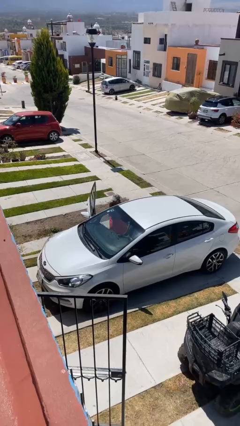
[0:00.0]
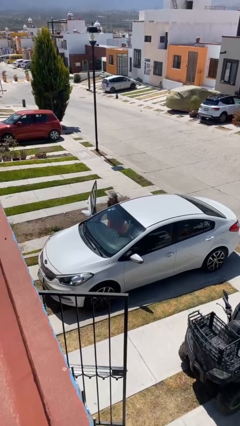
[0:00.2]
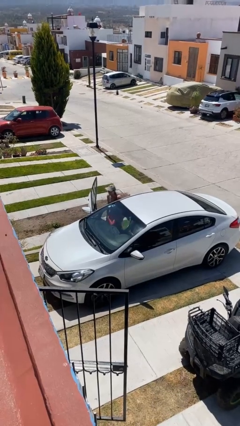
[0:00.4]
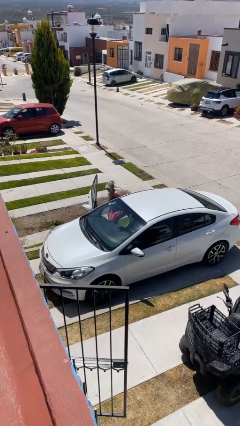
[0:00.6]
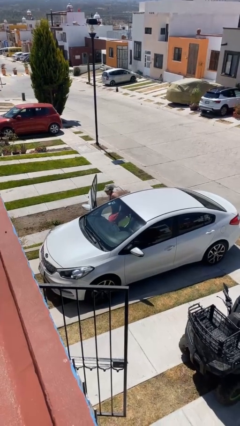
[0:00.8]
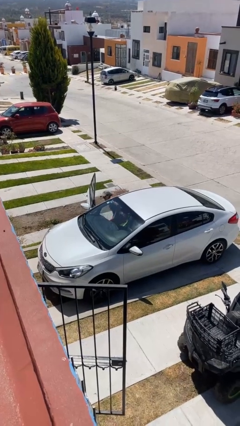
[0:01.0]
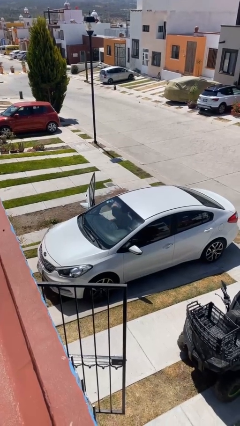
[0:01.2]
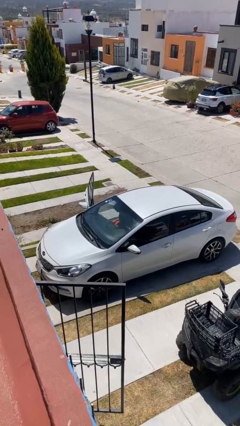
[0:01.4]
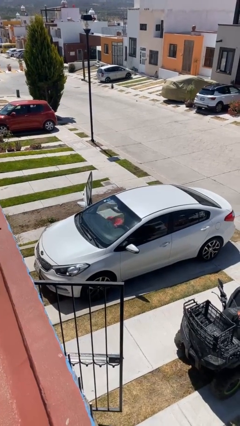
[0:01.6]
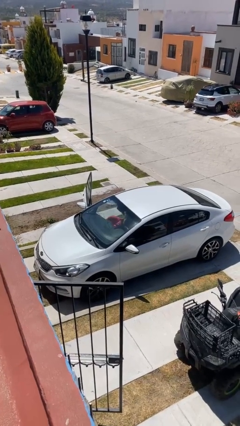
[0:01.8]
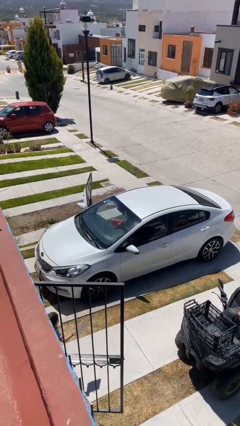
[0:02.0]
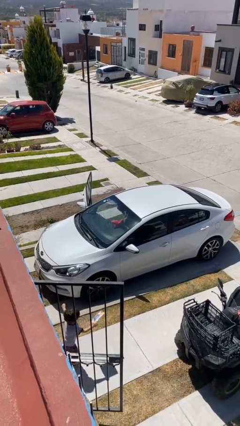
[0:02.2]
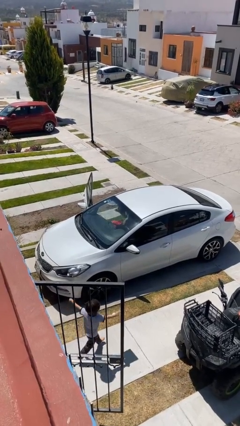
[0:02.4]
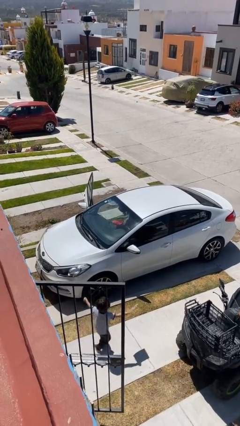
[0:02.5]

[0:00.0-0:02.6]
person enters car

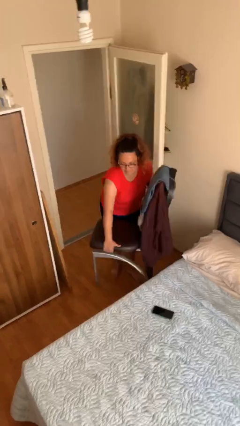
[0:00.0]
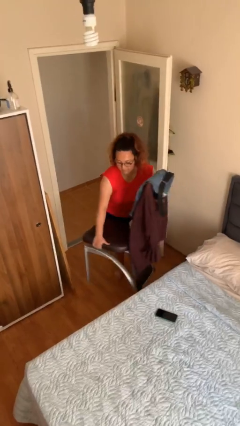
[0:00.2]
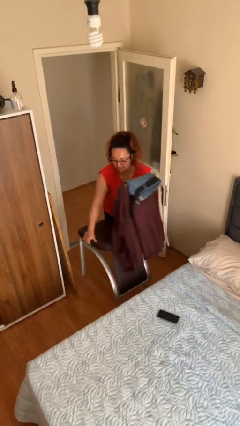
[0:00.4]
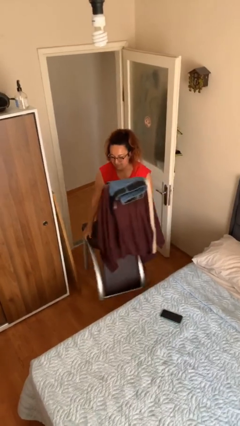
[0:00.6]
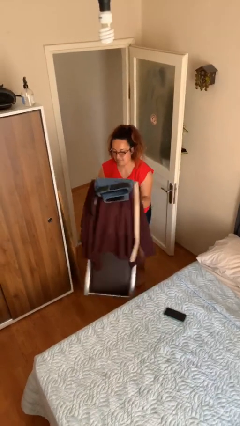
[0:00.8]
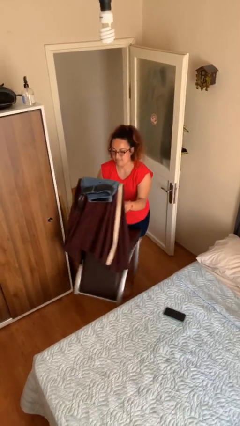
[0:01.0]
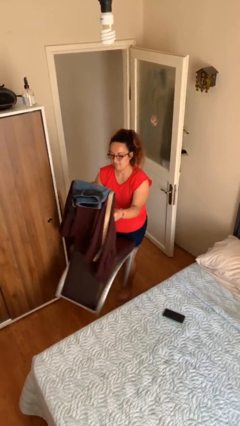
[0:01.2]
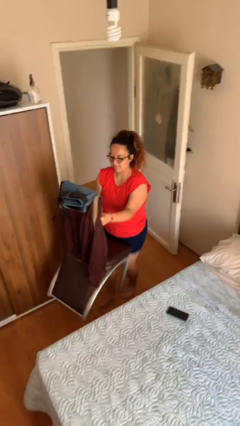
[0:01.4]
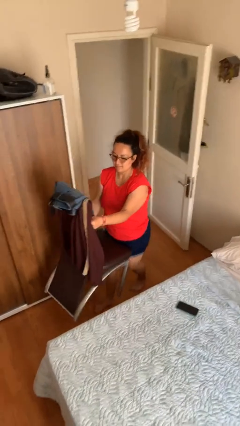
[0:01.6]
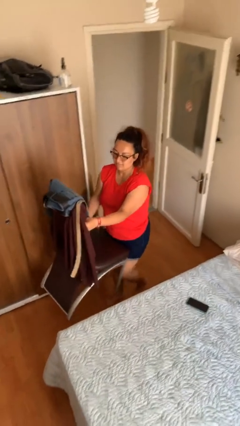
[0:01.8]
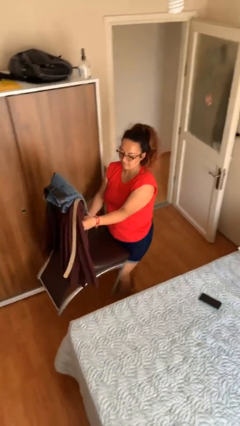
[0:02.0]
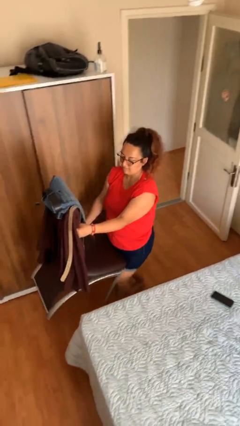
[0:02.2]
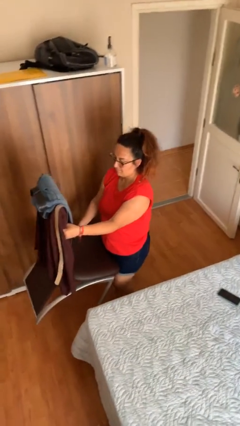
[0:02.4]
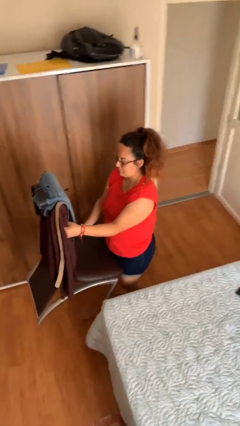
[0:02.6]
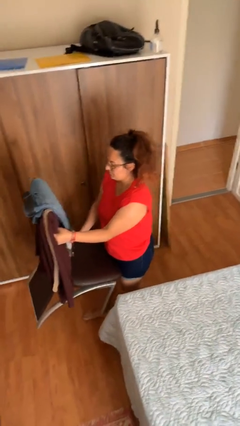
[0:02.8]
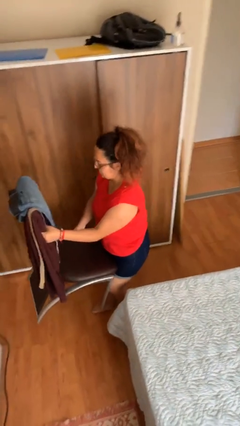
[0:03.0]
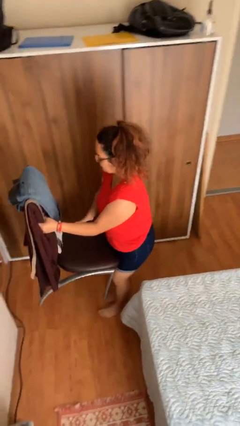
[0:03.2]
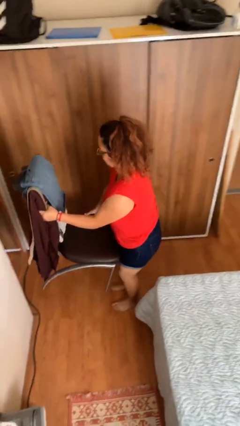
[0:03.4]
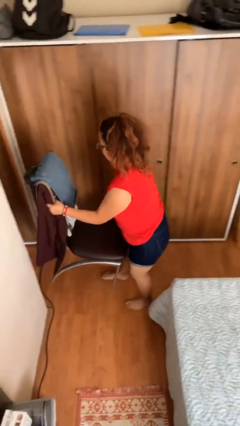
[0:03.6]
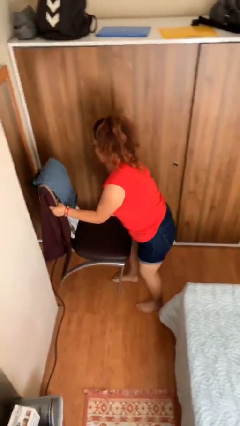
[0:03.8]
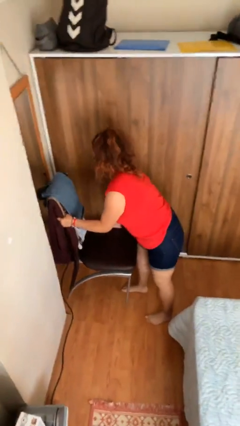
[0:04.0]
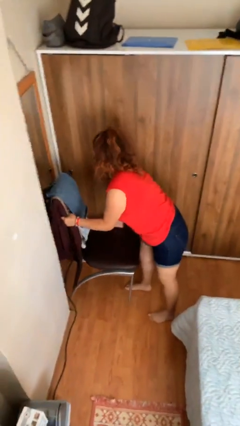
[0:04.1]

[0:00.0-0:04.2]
person carries heavy object

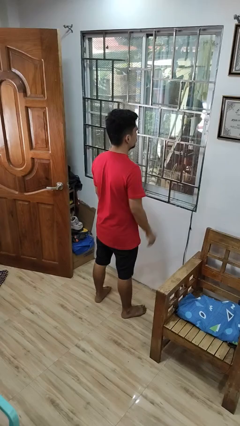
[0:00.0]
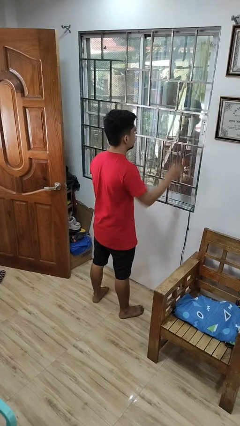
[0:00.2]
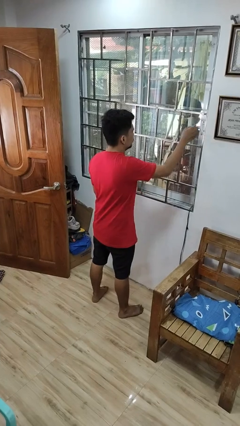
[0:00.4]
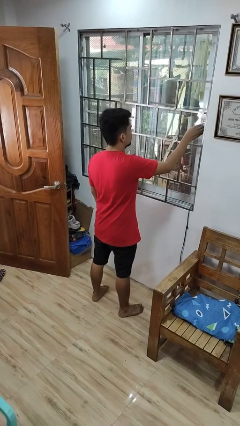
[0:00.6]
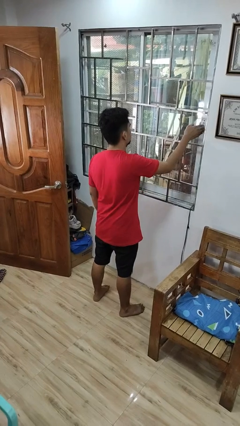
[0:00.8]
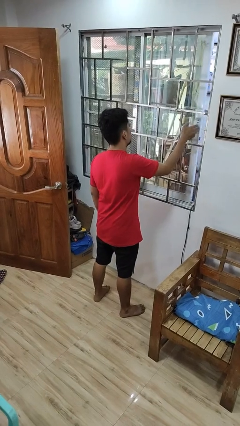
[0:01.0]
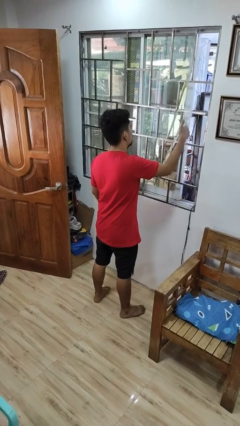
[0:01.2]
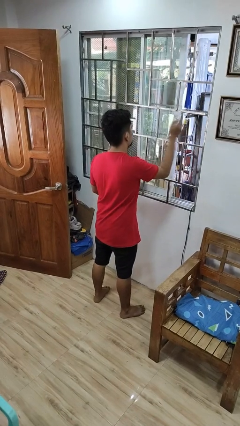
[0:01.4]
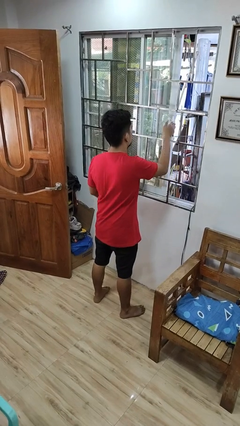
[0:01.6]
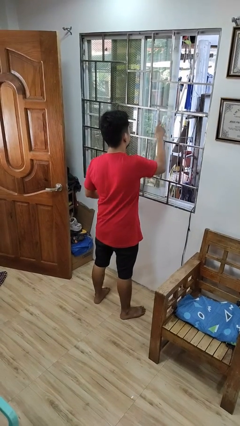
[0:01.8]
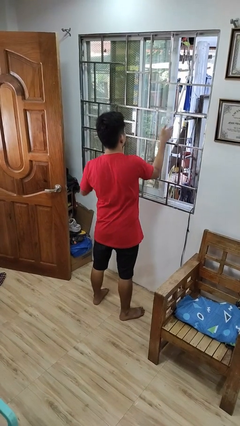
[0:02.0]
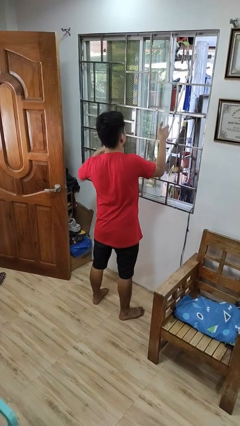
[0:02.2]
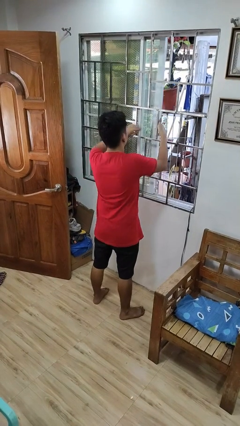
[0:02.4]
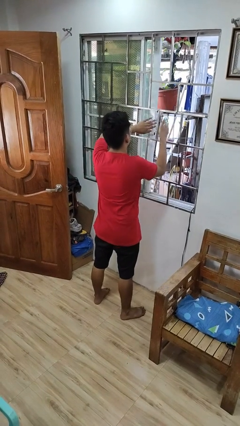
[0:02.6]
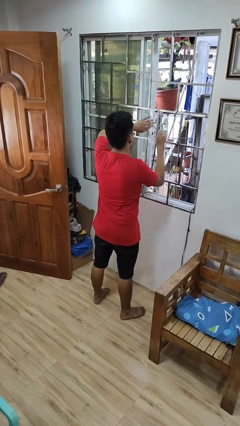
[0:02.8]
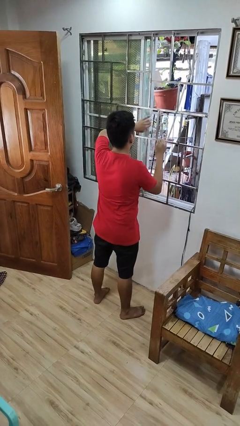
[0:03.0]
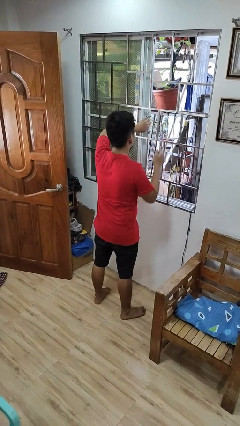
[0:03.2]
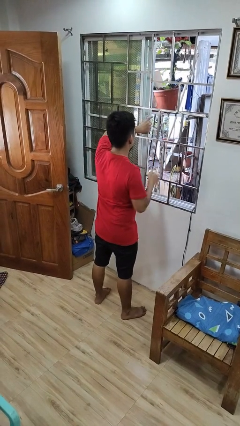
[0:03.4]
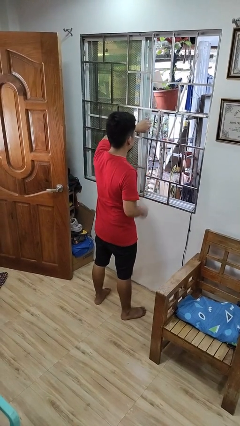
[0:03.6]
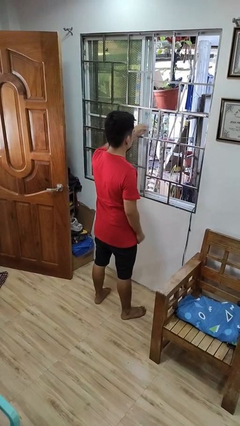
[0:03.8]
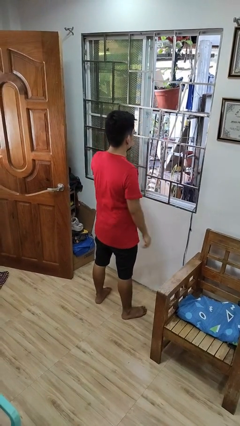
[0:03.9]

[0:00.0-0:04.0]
person opens home window

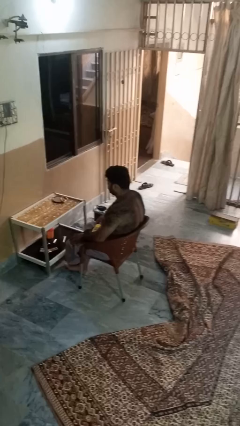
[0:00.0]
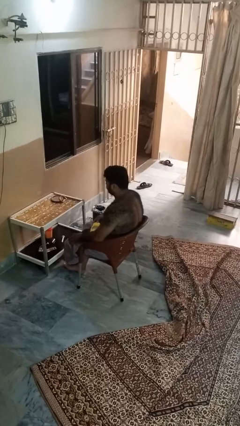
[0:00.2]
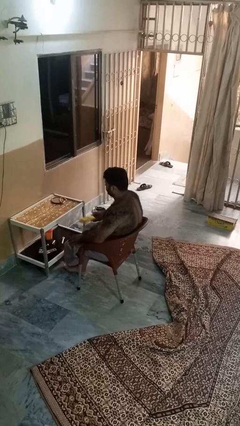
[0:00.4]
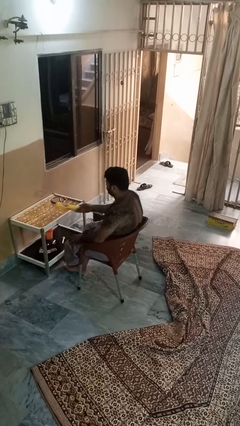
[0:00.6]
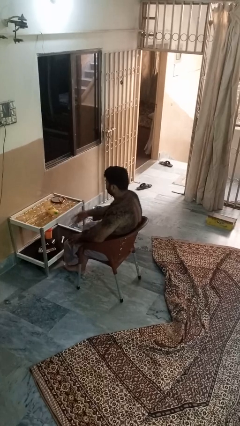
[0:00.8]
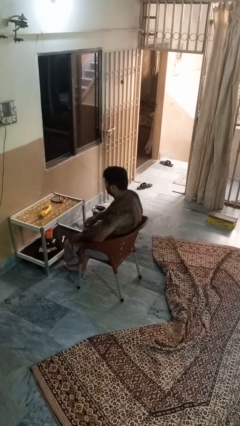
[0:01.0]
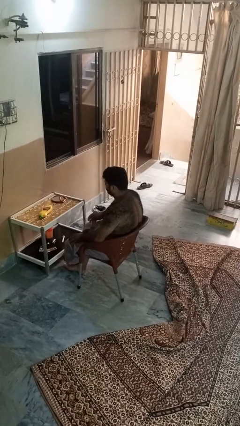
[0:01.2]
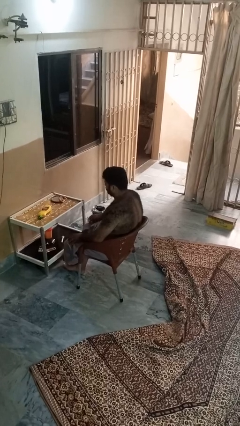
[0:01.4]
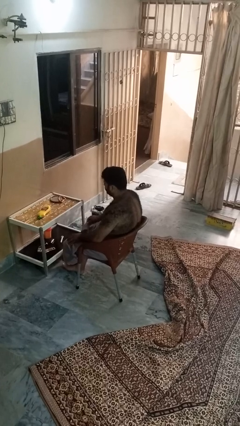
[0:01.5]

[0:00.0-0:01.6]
person throws object on table

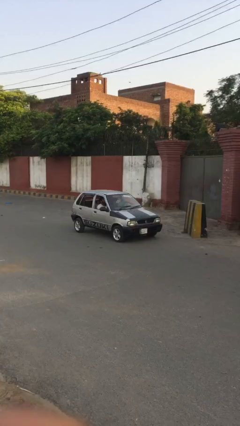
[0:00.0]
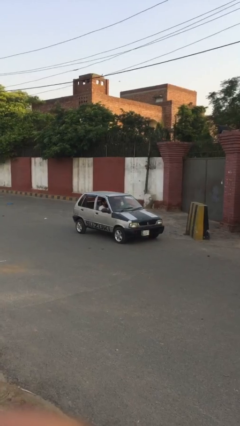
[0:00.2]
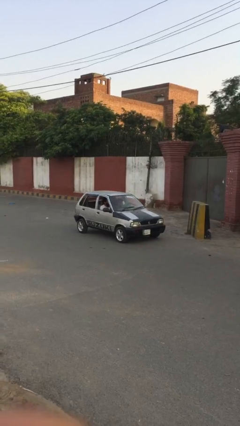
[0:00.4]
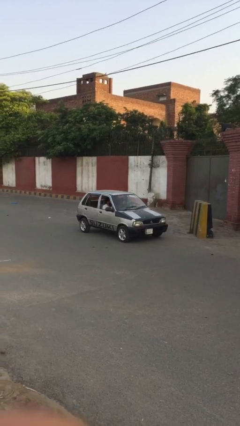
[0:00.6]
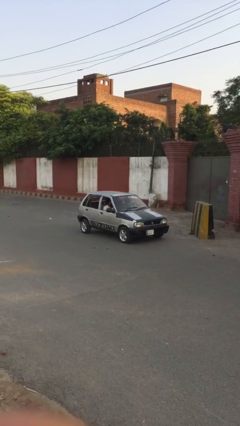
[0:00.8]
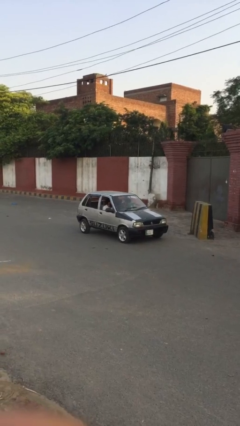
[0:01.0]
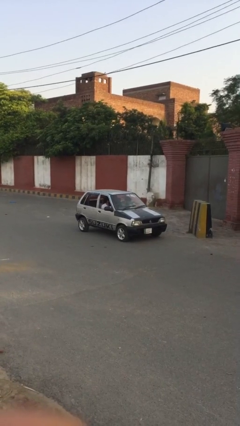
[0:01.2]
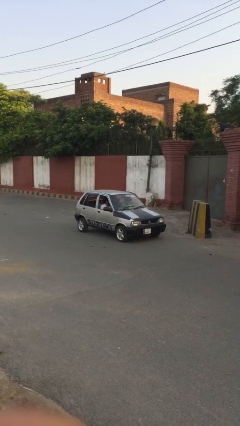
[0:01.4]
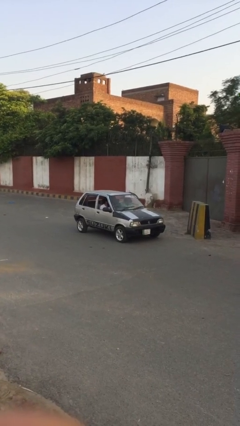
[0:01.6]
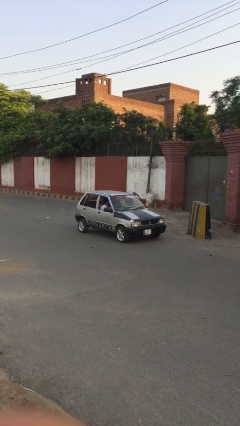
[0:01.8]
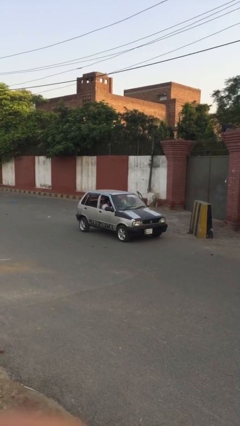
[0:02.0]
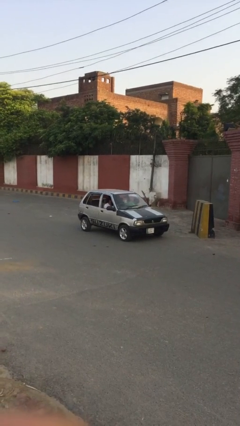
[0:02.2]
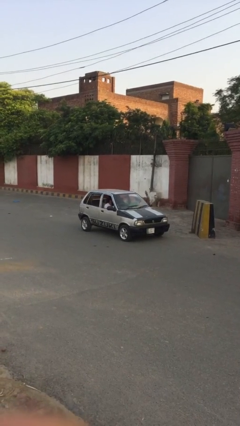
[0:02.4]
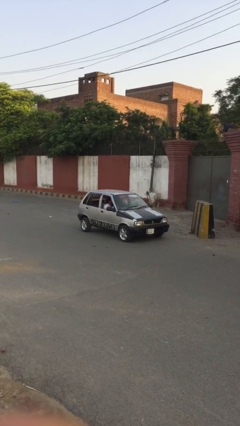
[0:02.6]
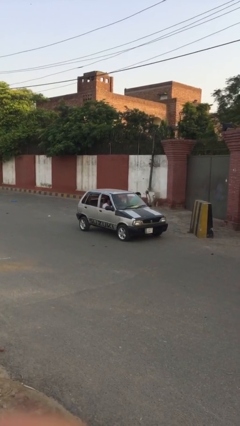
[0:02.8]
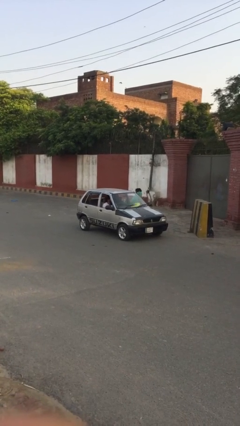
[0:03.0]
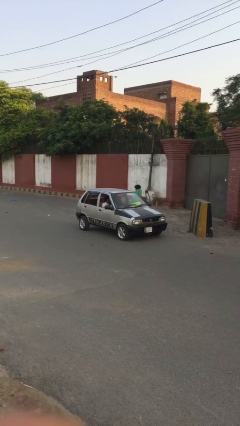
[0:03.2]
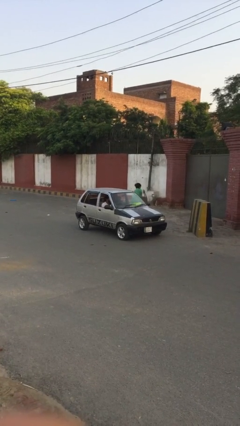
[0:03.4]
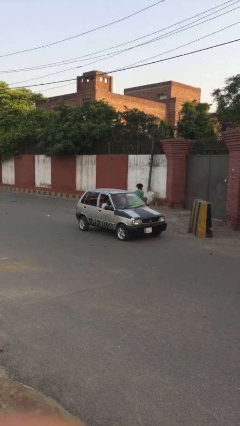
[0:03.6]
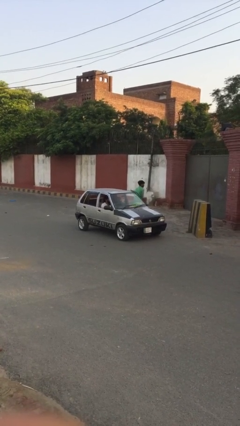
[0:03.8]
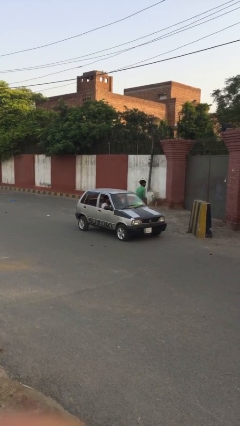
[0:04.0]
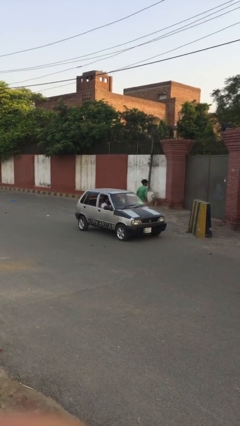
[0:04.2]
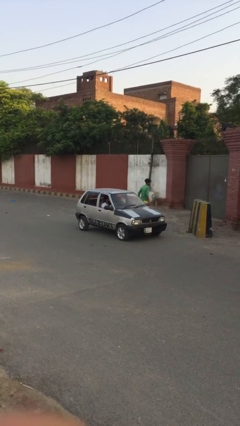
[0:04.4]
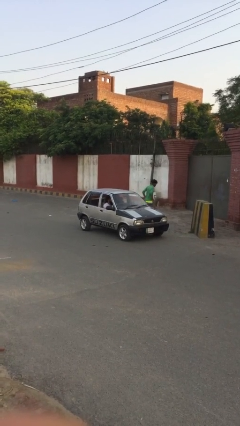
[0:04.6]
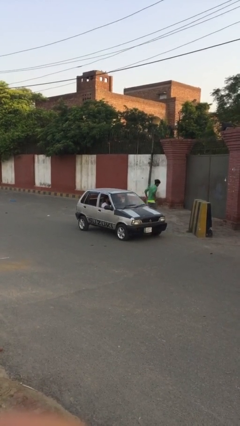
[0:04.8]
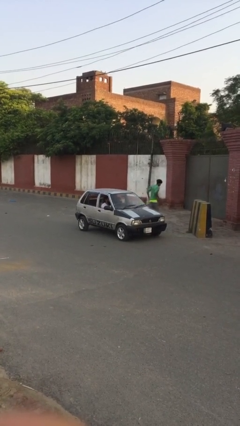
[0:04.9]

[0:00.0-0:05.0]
car drops off person

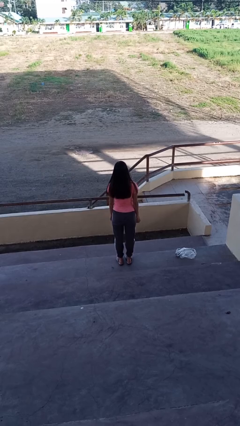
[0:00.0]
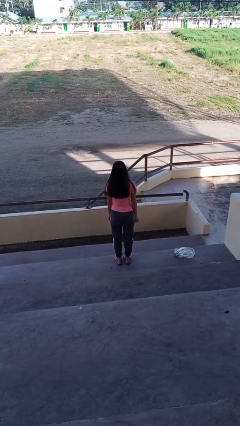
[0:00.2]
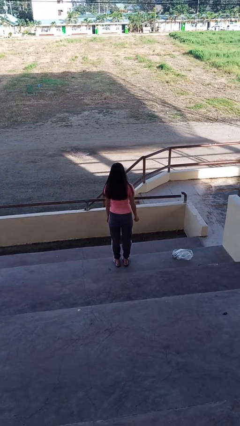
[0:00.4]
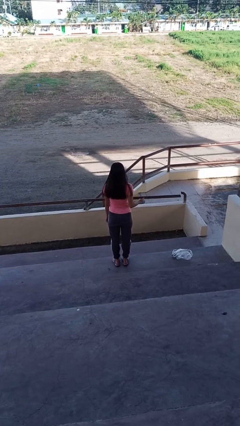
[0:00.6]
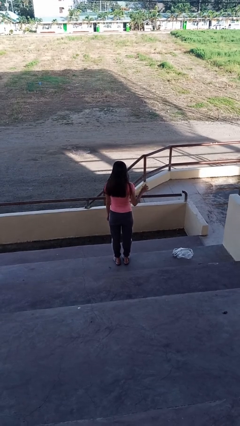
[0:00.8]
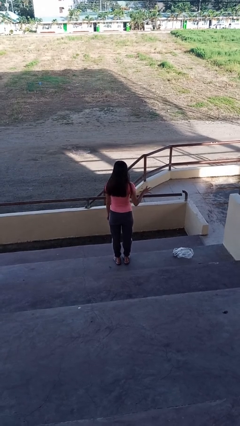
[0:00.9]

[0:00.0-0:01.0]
person drops object
